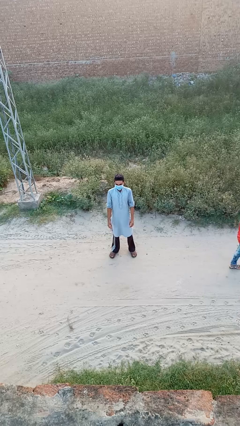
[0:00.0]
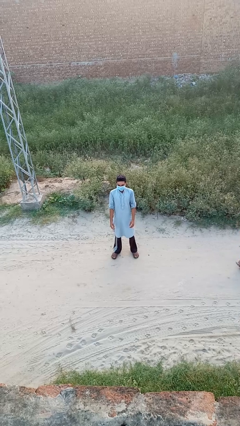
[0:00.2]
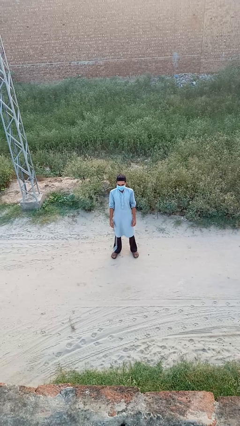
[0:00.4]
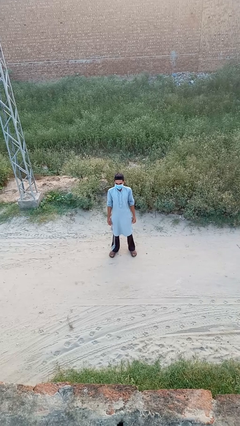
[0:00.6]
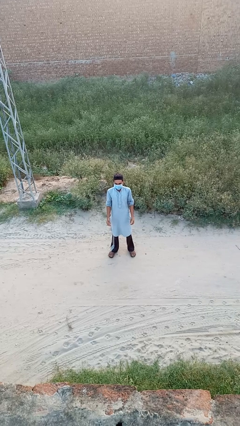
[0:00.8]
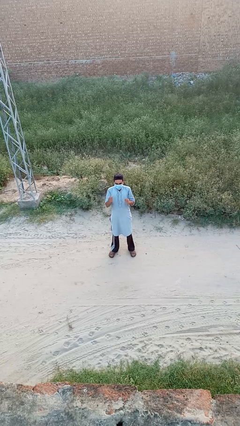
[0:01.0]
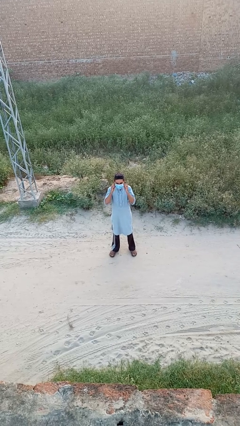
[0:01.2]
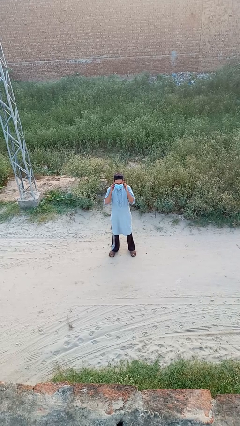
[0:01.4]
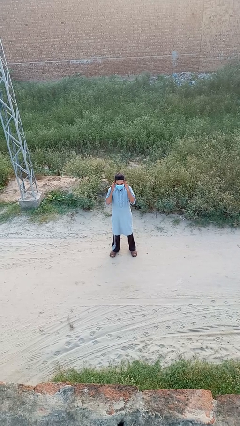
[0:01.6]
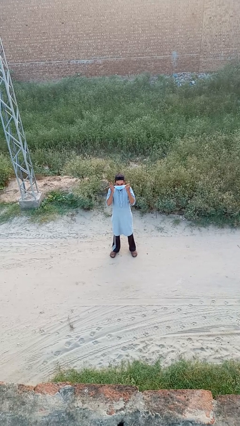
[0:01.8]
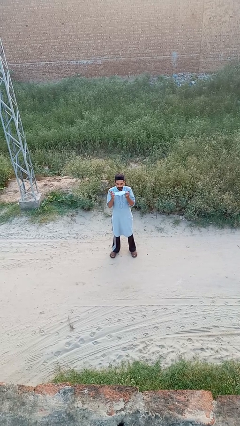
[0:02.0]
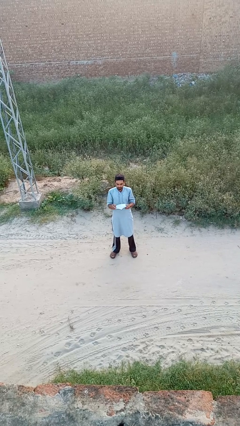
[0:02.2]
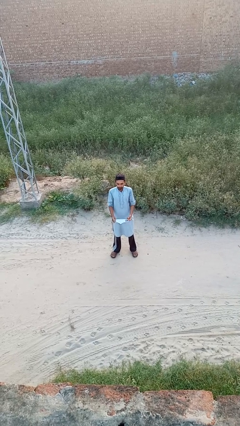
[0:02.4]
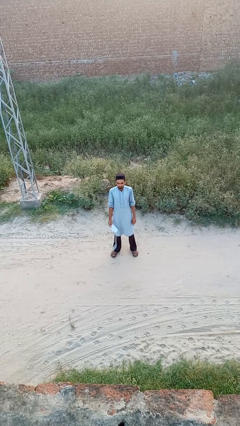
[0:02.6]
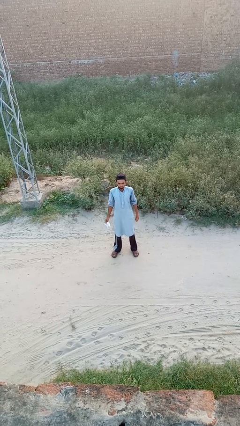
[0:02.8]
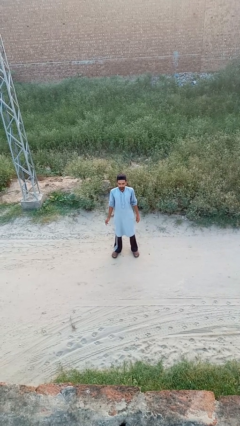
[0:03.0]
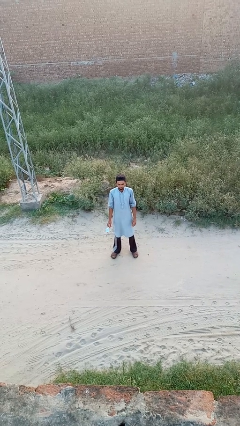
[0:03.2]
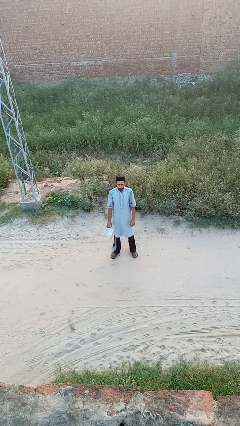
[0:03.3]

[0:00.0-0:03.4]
person takes off facemask

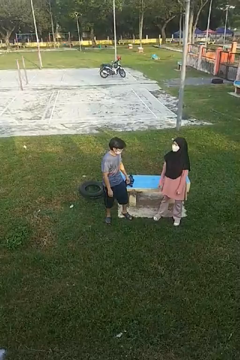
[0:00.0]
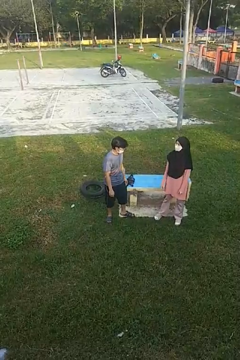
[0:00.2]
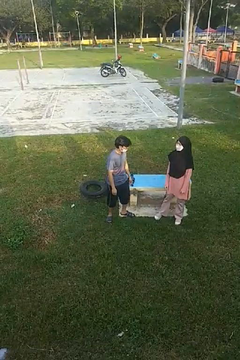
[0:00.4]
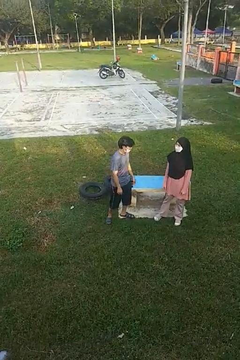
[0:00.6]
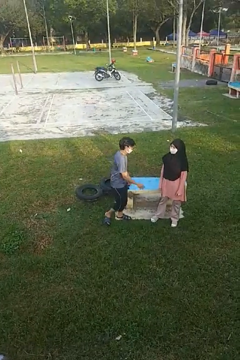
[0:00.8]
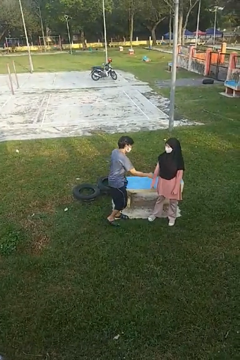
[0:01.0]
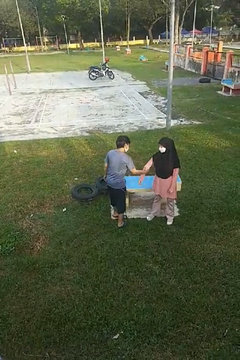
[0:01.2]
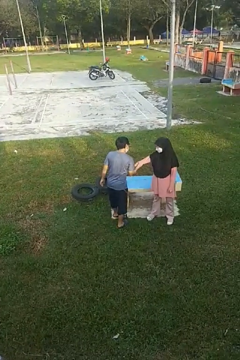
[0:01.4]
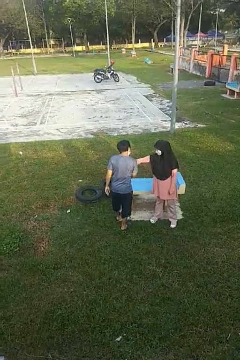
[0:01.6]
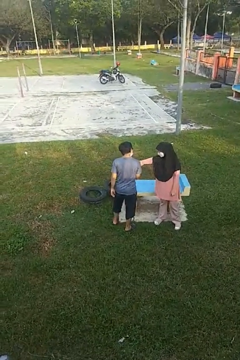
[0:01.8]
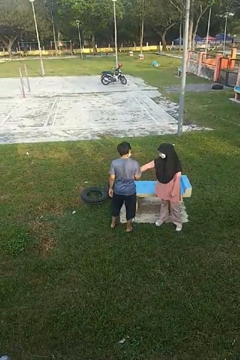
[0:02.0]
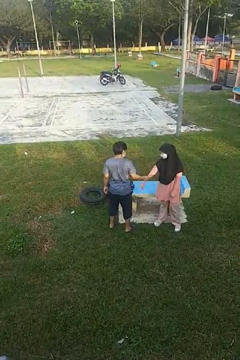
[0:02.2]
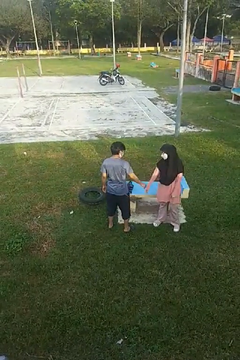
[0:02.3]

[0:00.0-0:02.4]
person grabs person by forearm

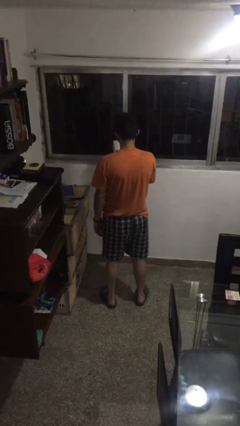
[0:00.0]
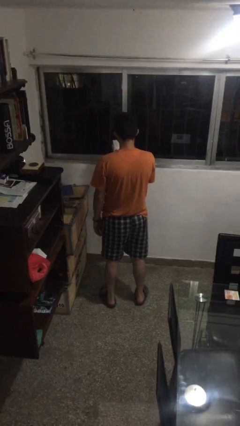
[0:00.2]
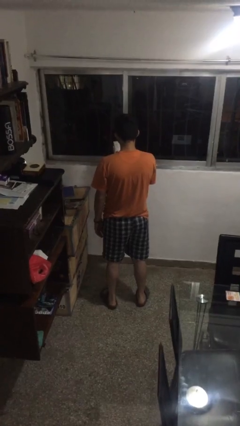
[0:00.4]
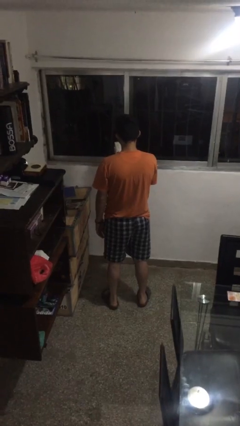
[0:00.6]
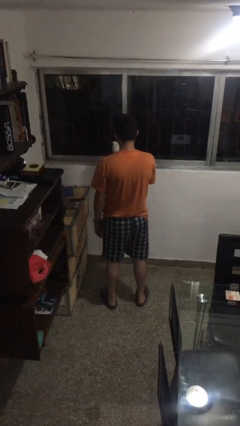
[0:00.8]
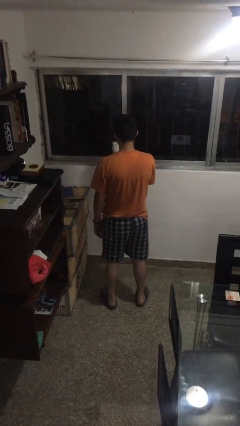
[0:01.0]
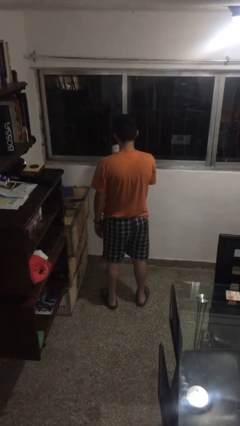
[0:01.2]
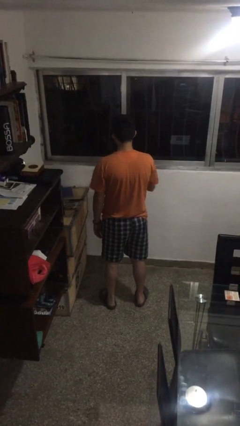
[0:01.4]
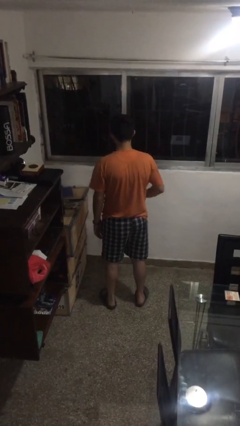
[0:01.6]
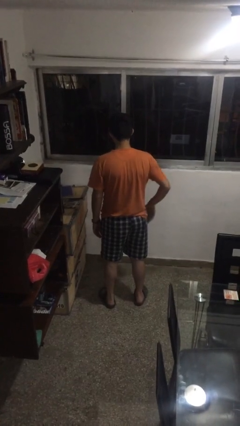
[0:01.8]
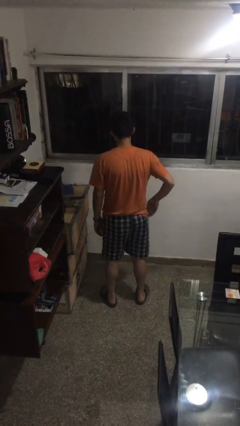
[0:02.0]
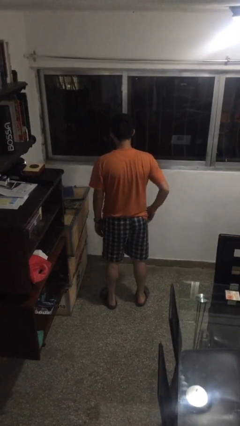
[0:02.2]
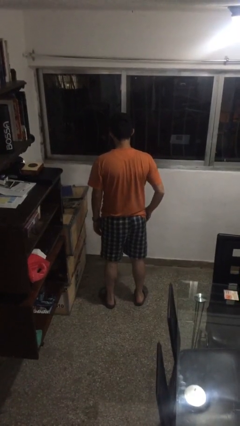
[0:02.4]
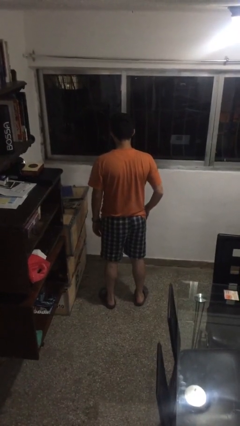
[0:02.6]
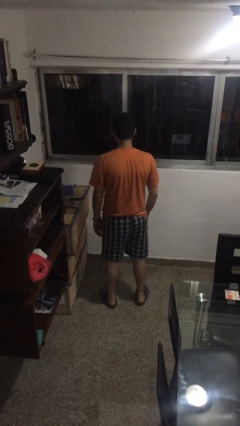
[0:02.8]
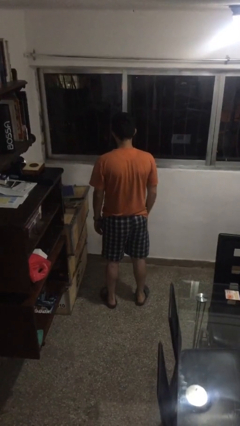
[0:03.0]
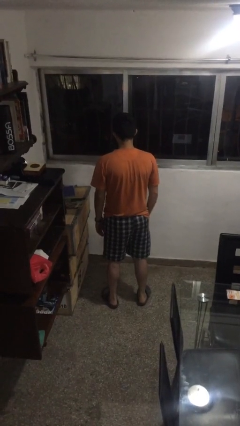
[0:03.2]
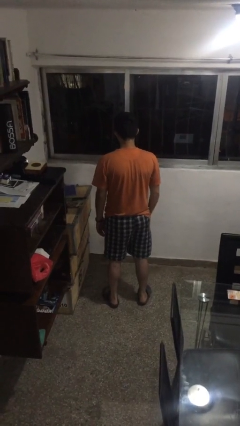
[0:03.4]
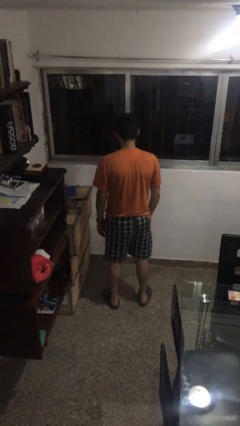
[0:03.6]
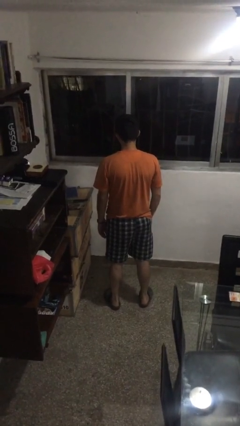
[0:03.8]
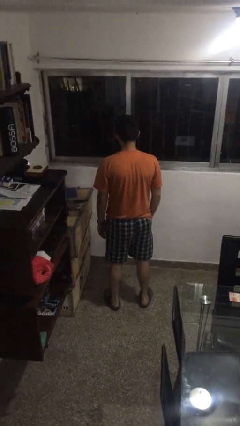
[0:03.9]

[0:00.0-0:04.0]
person puts phone into pocket

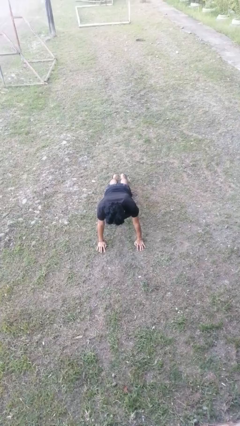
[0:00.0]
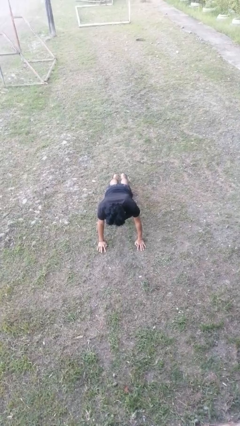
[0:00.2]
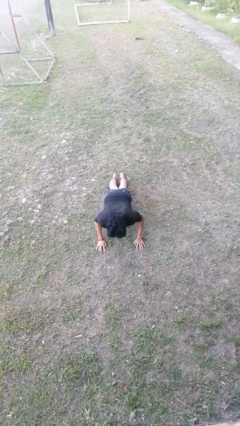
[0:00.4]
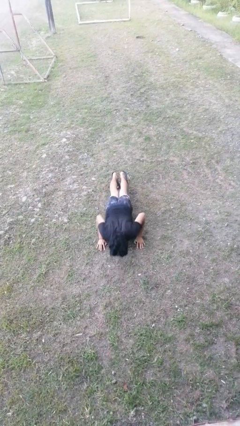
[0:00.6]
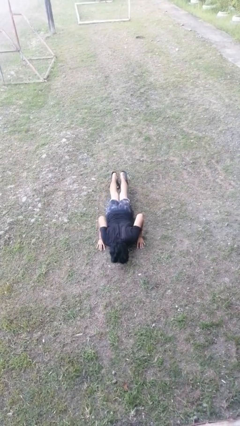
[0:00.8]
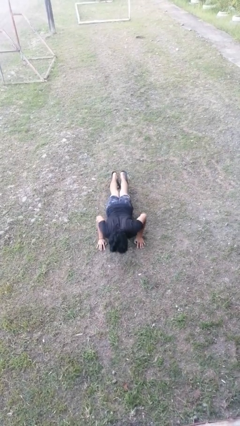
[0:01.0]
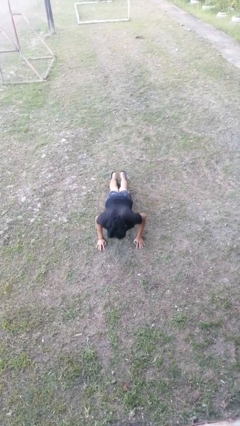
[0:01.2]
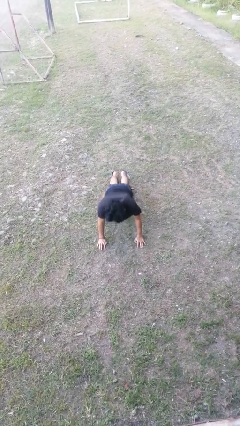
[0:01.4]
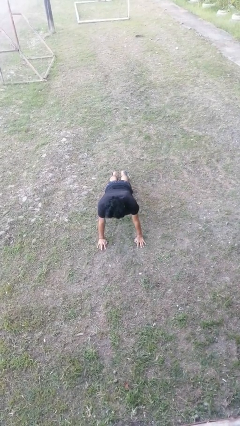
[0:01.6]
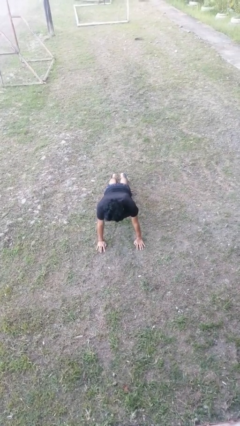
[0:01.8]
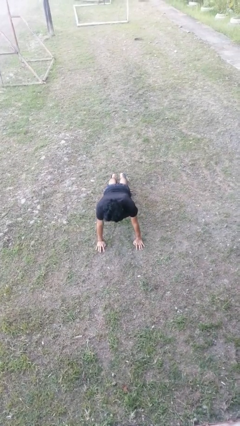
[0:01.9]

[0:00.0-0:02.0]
person exercises with pushup

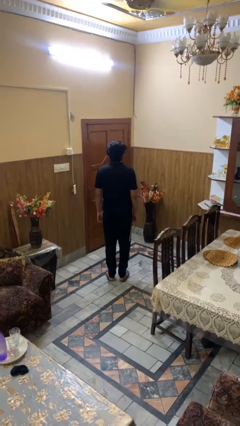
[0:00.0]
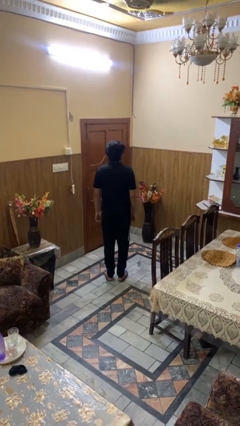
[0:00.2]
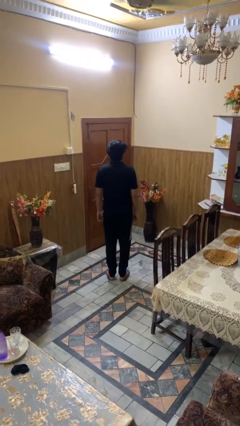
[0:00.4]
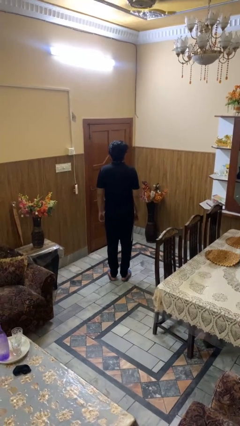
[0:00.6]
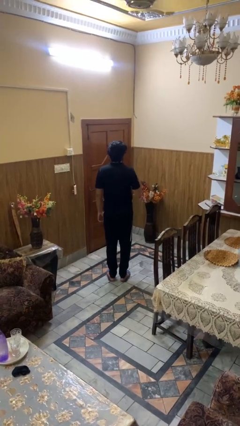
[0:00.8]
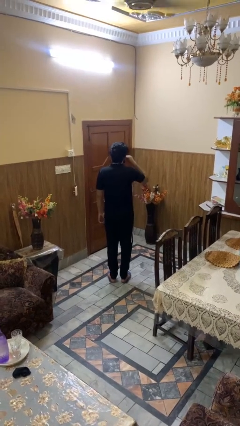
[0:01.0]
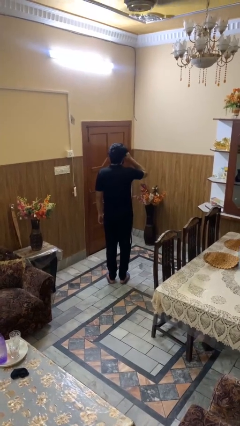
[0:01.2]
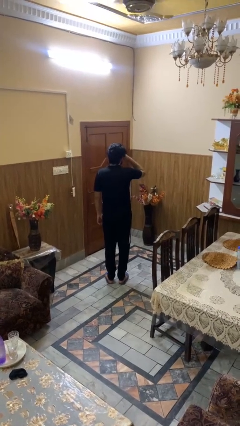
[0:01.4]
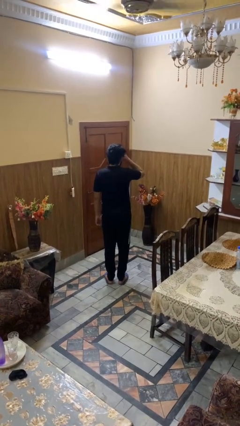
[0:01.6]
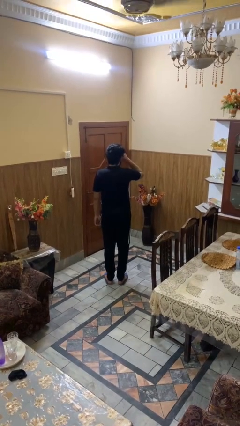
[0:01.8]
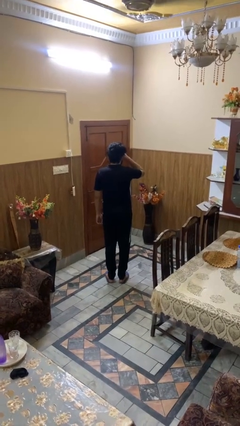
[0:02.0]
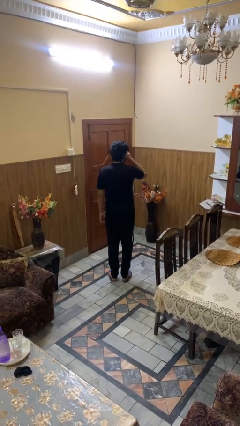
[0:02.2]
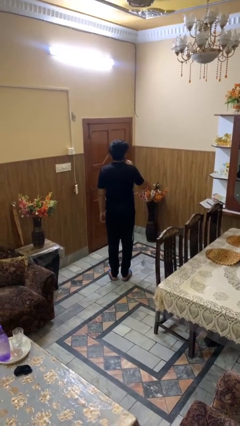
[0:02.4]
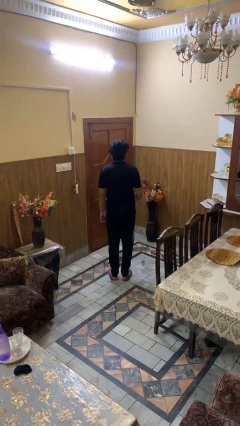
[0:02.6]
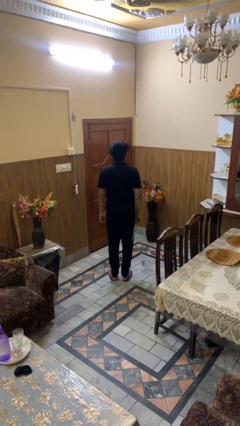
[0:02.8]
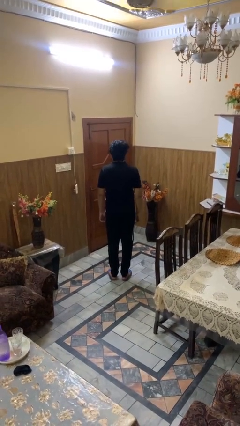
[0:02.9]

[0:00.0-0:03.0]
person rubs eyes

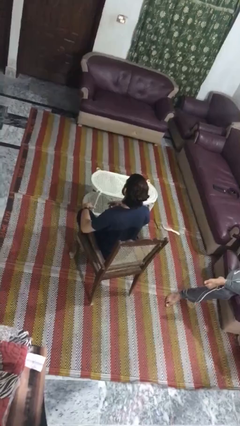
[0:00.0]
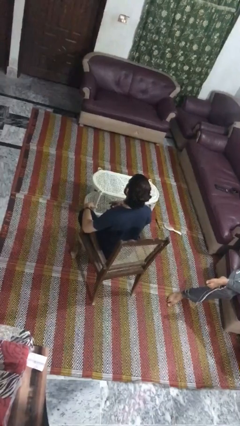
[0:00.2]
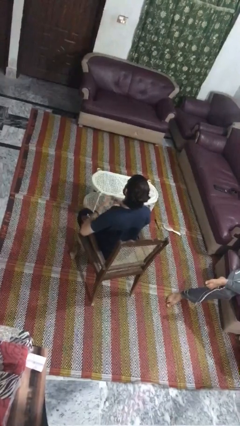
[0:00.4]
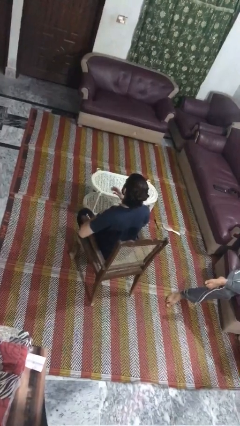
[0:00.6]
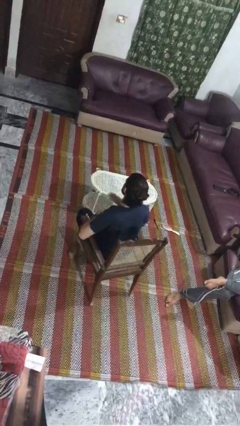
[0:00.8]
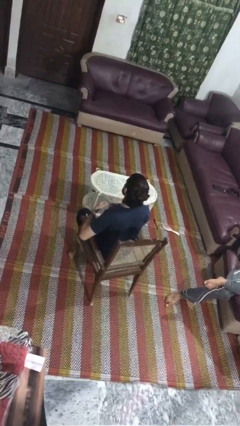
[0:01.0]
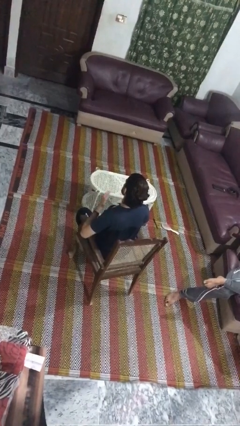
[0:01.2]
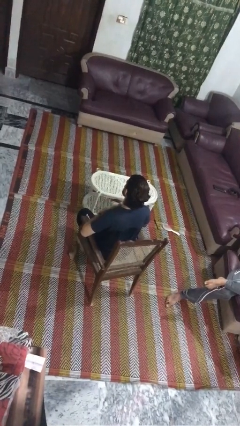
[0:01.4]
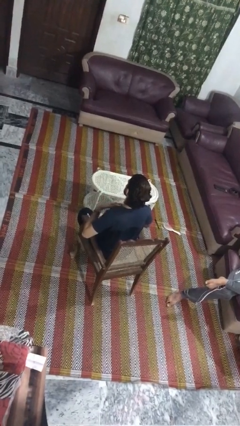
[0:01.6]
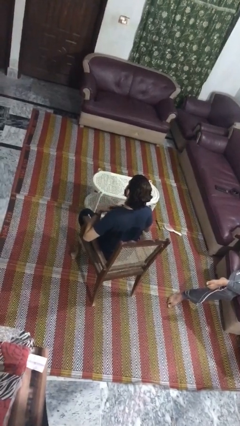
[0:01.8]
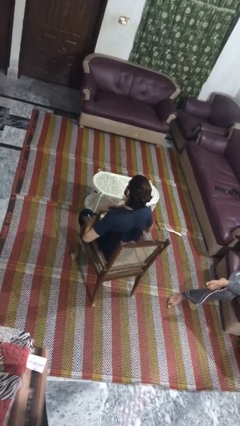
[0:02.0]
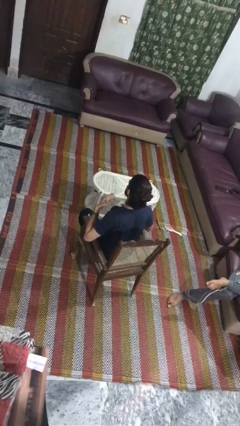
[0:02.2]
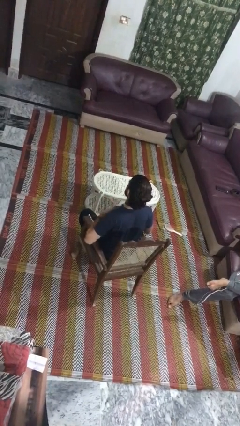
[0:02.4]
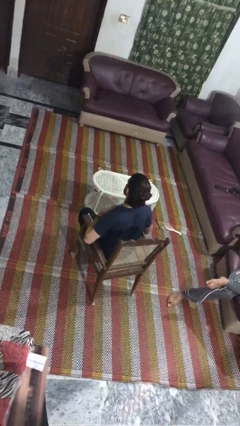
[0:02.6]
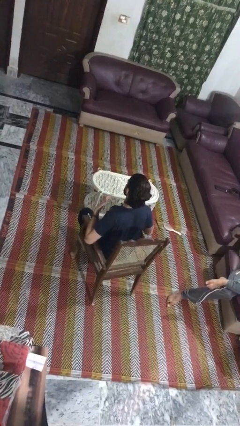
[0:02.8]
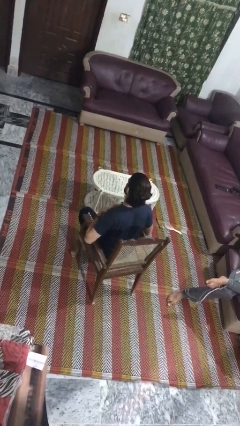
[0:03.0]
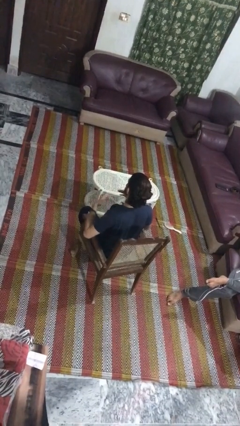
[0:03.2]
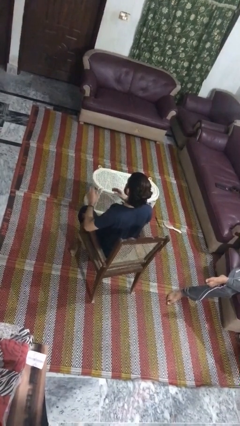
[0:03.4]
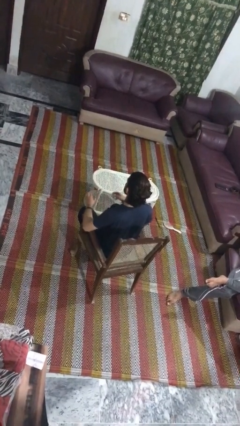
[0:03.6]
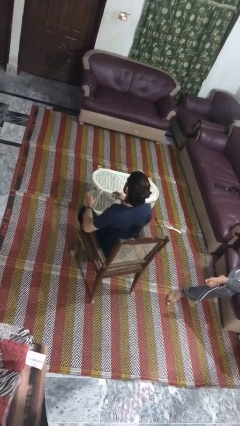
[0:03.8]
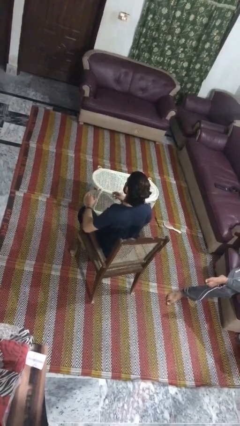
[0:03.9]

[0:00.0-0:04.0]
person drums on chest
